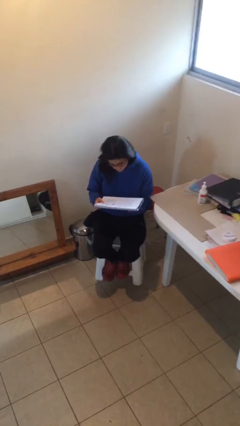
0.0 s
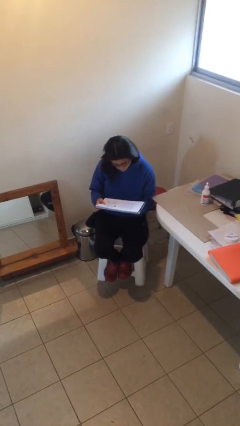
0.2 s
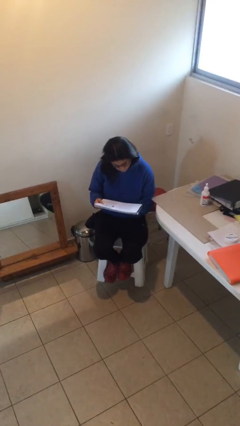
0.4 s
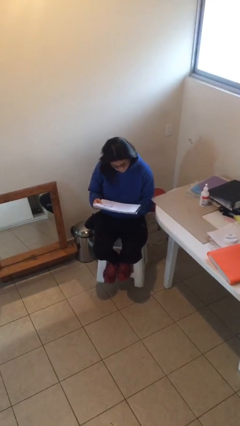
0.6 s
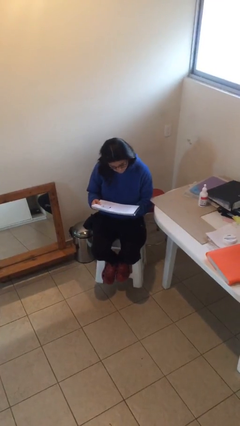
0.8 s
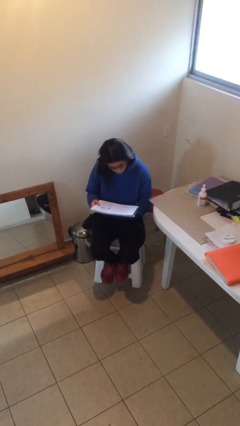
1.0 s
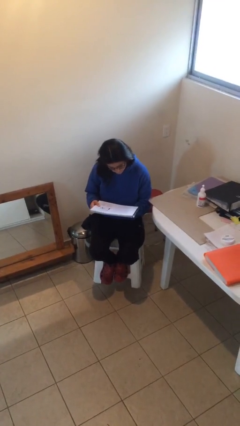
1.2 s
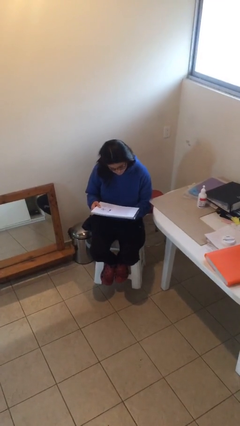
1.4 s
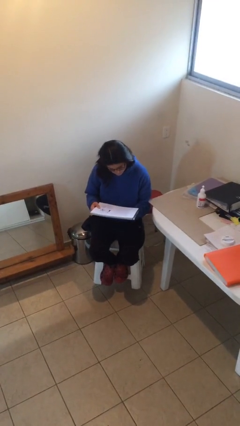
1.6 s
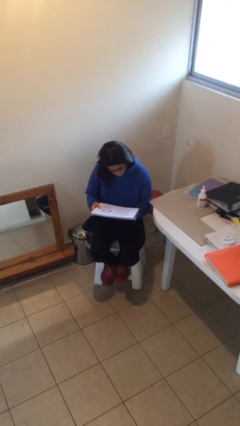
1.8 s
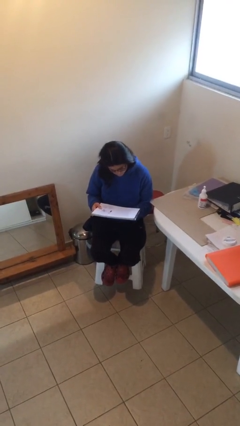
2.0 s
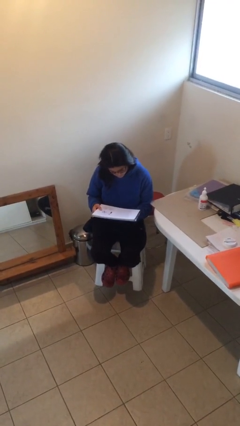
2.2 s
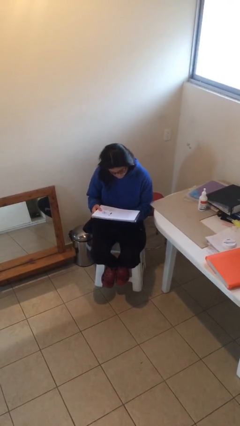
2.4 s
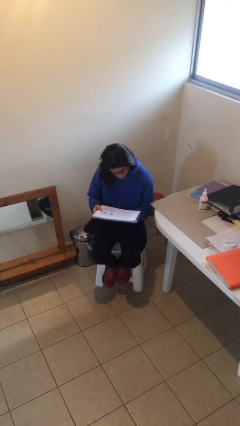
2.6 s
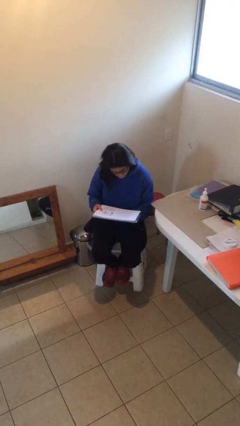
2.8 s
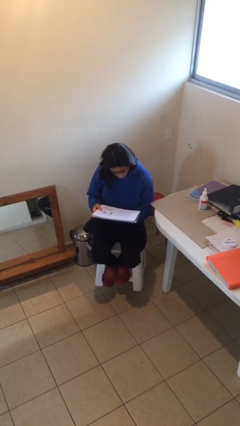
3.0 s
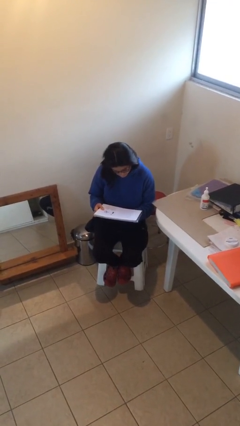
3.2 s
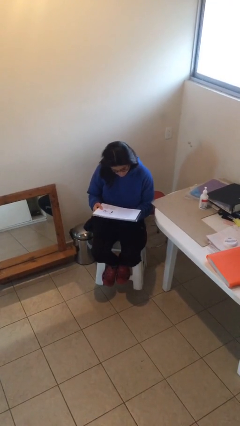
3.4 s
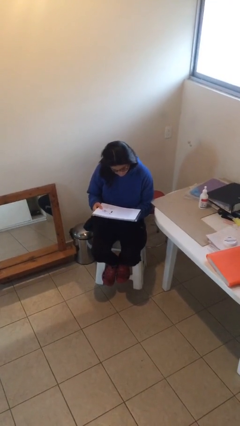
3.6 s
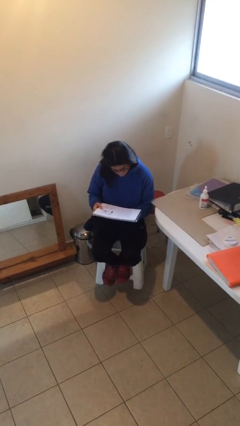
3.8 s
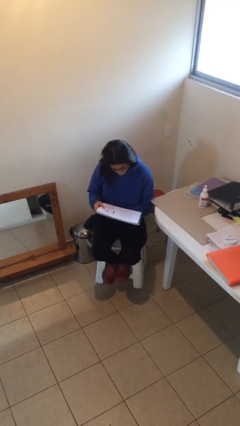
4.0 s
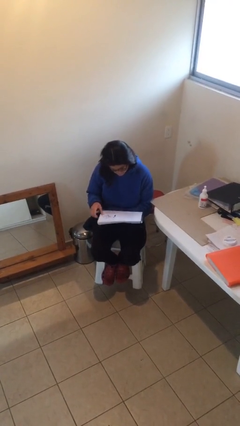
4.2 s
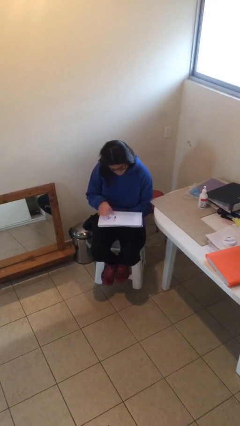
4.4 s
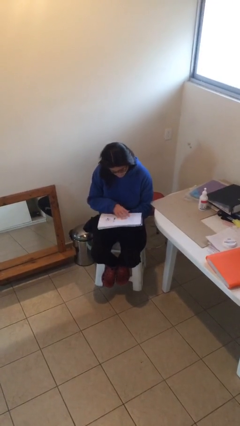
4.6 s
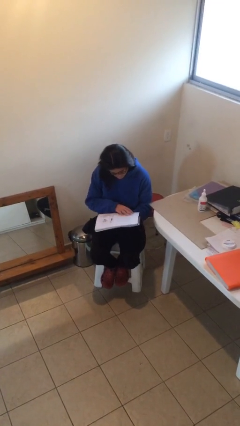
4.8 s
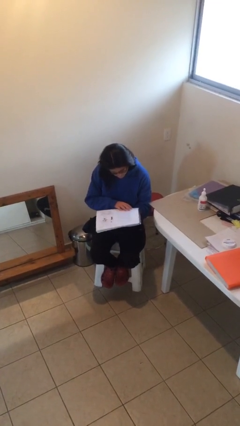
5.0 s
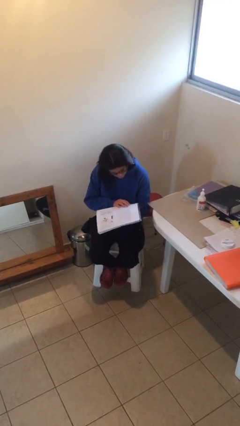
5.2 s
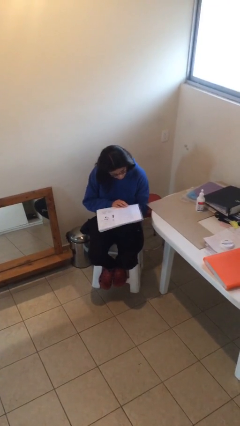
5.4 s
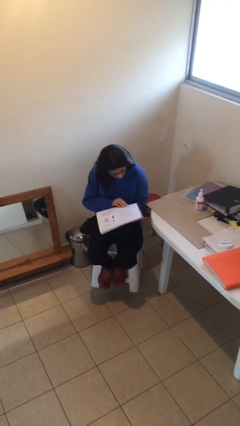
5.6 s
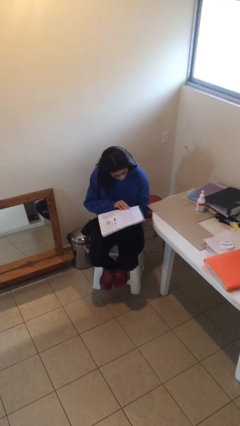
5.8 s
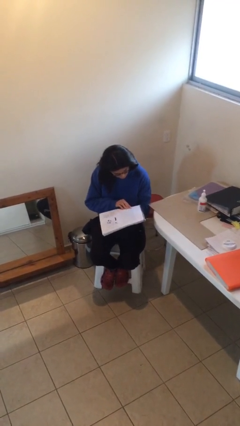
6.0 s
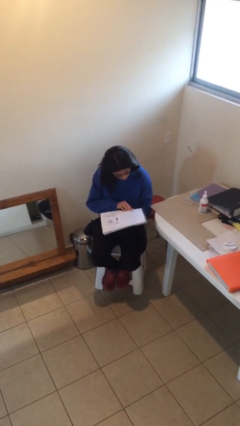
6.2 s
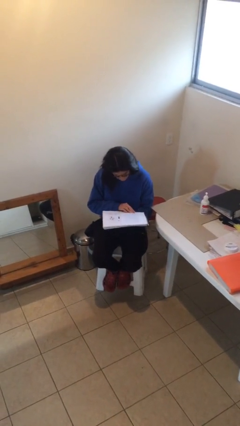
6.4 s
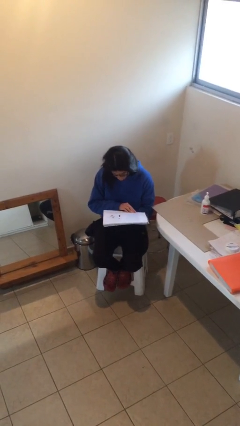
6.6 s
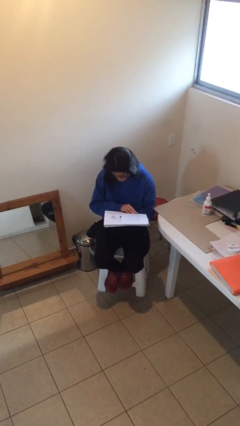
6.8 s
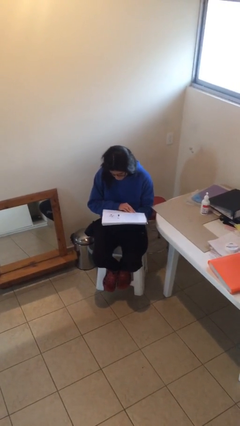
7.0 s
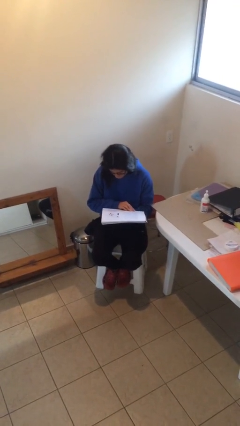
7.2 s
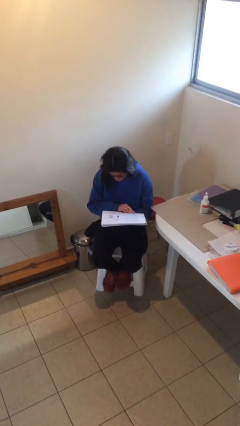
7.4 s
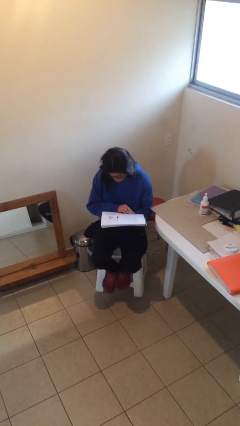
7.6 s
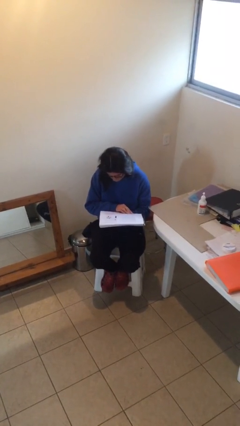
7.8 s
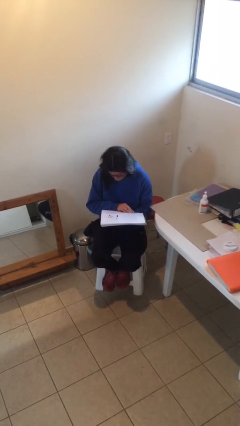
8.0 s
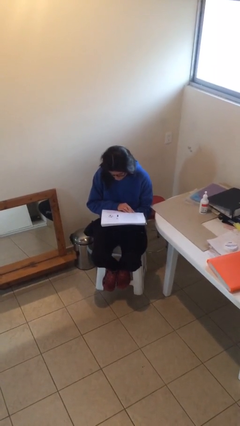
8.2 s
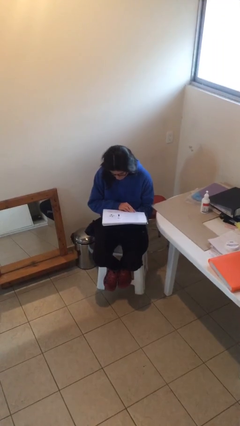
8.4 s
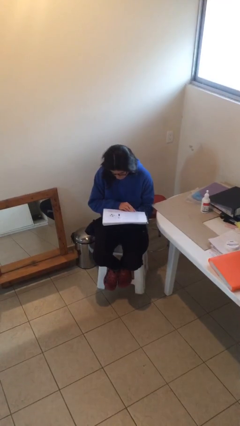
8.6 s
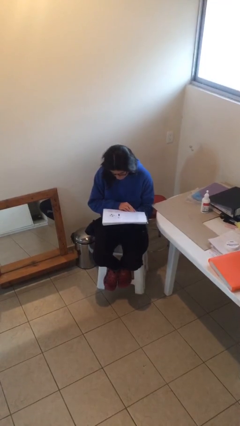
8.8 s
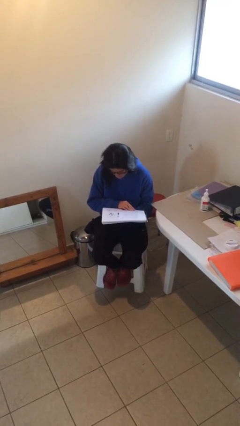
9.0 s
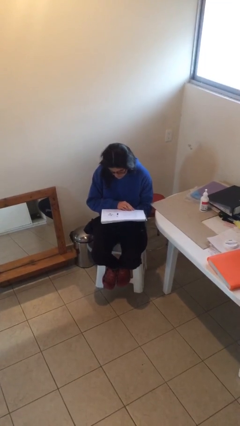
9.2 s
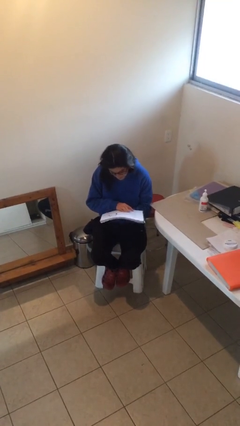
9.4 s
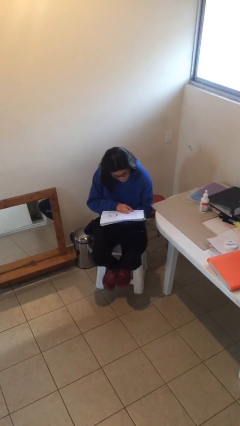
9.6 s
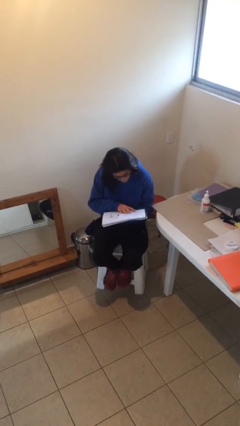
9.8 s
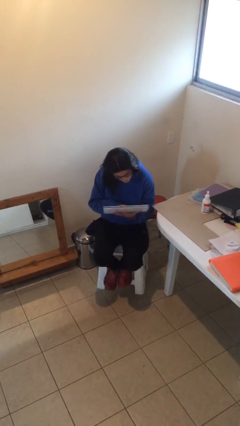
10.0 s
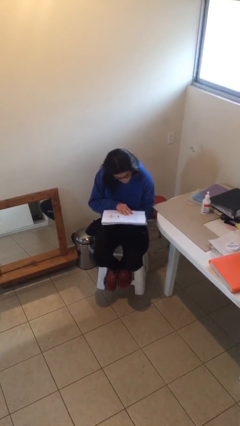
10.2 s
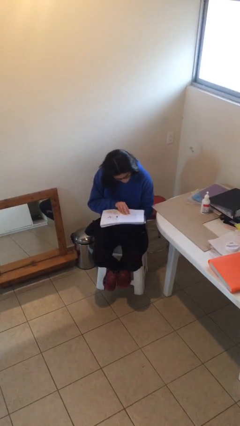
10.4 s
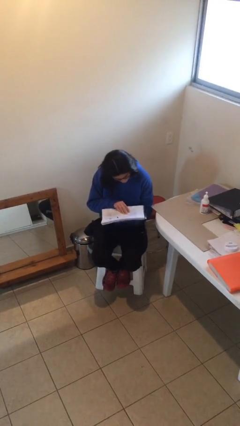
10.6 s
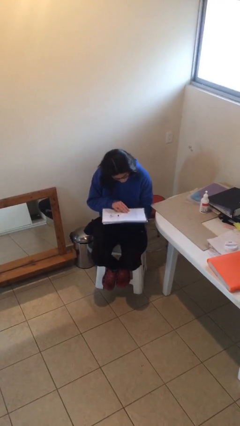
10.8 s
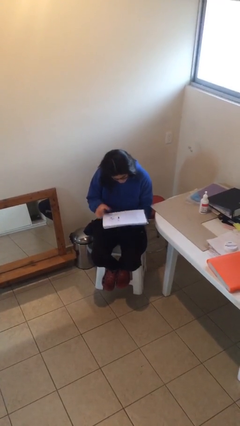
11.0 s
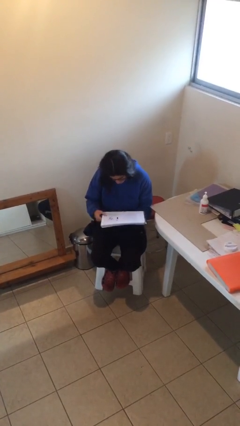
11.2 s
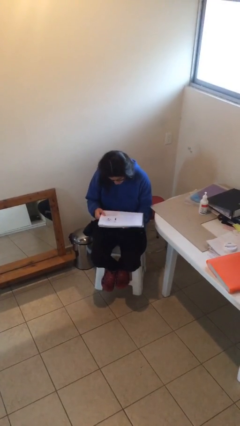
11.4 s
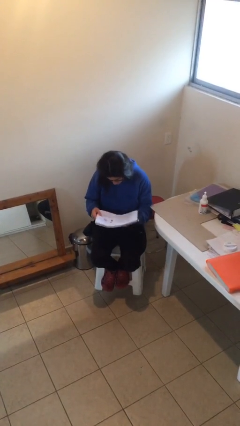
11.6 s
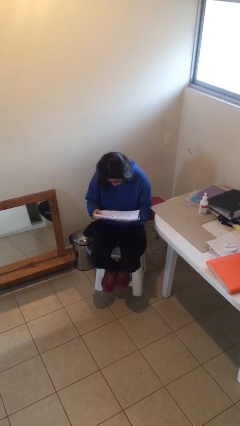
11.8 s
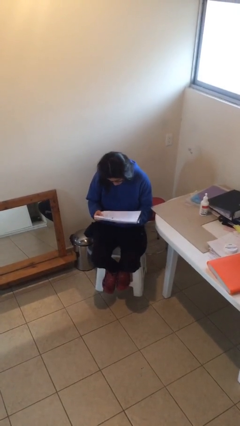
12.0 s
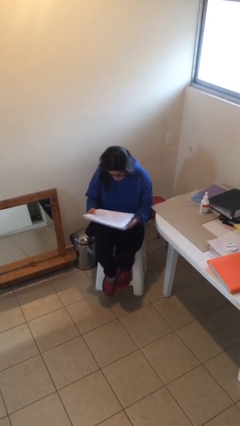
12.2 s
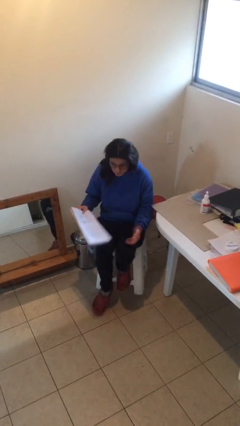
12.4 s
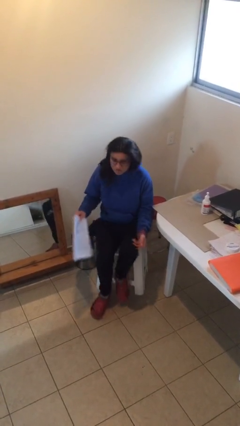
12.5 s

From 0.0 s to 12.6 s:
person reads document

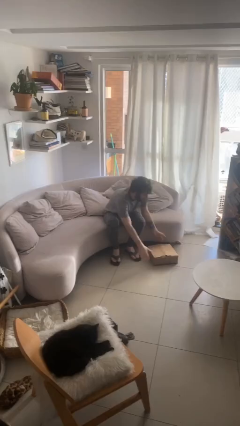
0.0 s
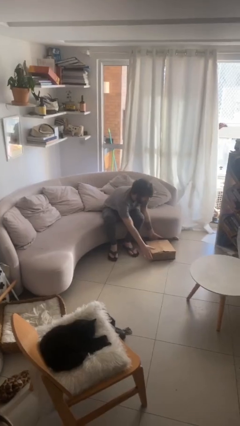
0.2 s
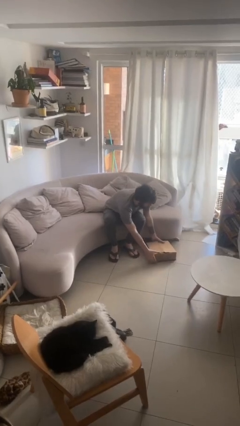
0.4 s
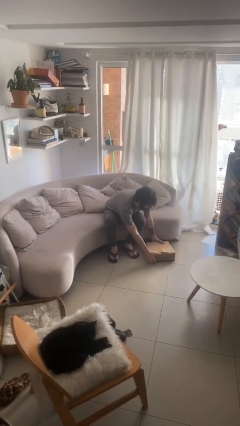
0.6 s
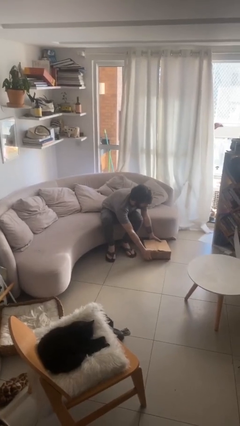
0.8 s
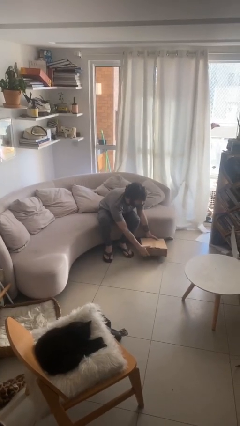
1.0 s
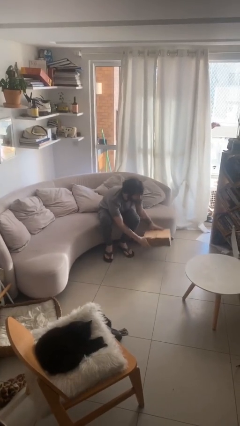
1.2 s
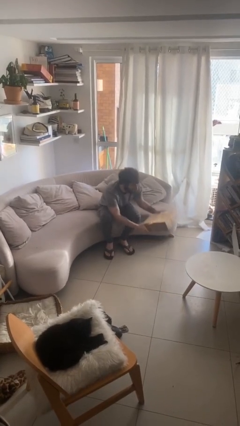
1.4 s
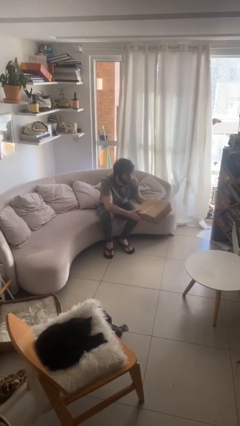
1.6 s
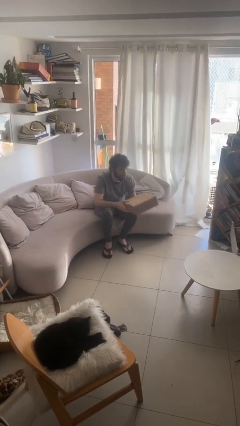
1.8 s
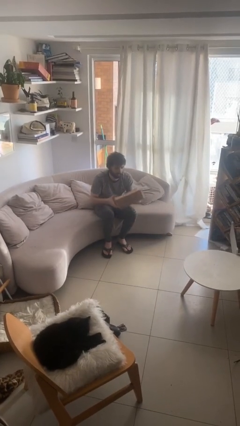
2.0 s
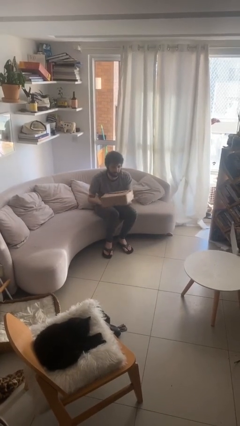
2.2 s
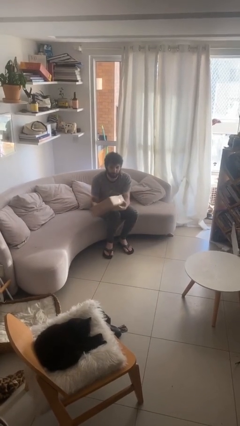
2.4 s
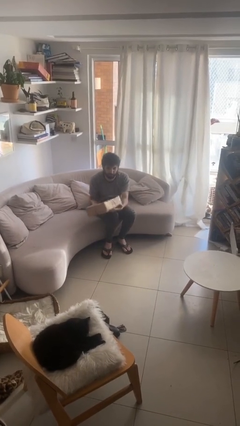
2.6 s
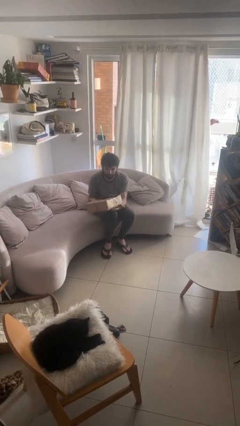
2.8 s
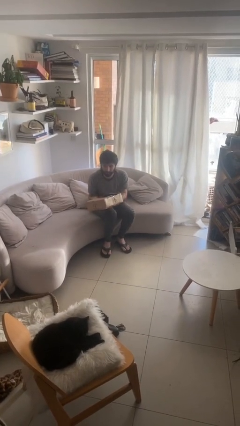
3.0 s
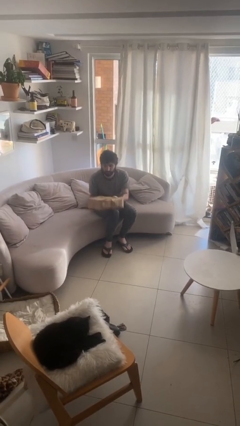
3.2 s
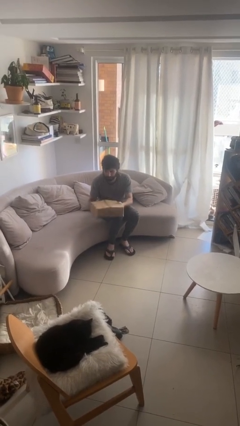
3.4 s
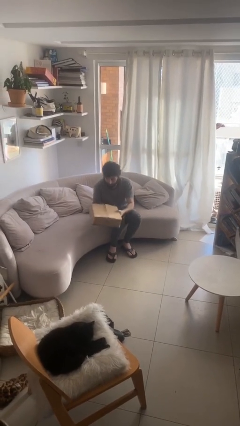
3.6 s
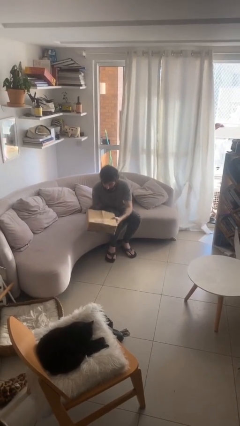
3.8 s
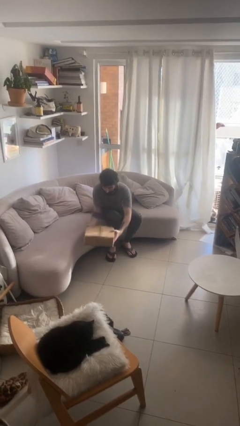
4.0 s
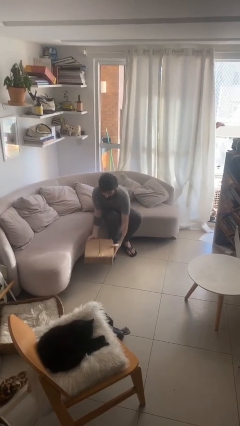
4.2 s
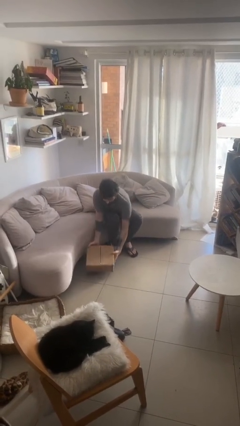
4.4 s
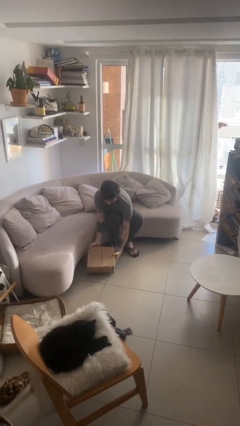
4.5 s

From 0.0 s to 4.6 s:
person picks up object from floor

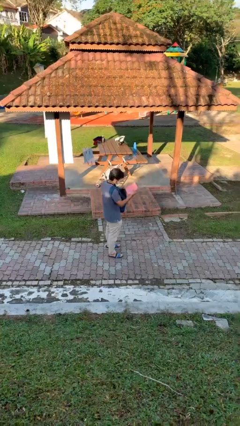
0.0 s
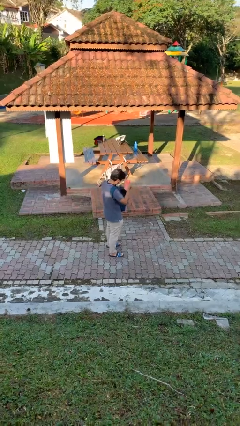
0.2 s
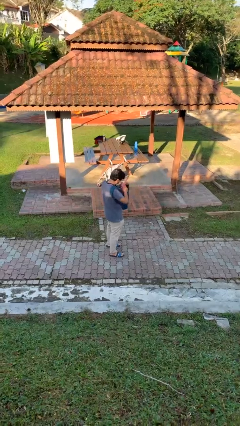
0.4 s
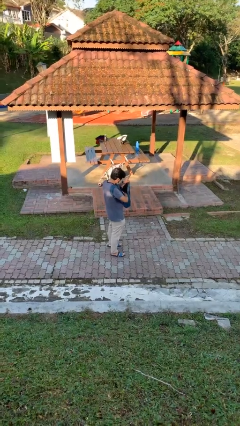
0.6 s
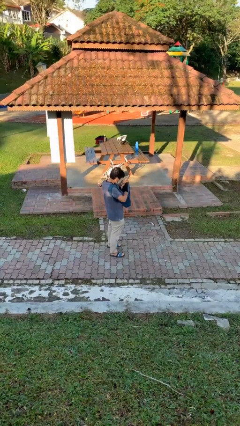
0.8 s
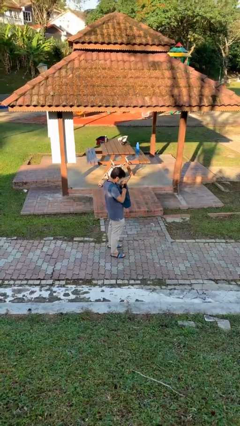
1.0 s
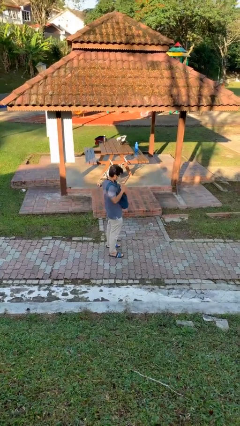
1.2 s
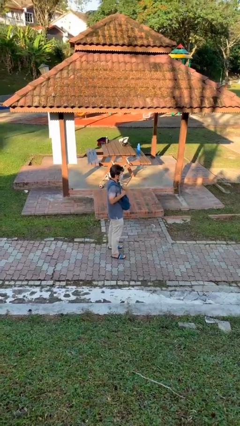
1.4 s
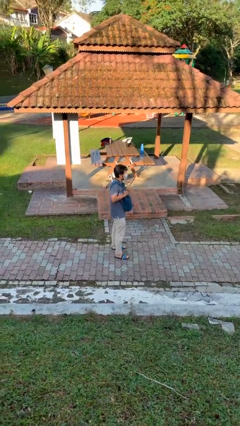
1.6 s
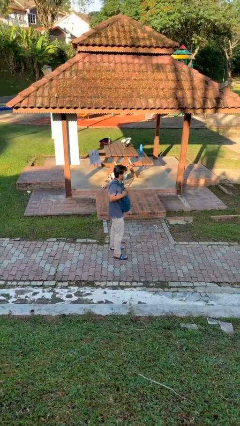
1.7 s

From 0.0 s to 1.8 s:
person puts object into backpack
